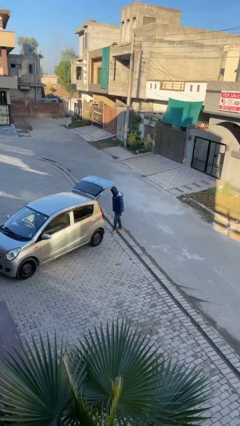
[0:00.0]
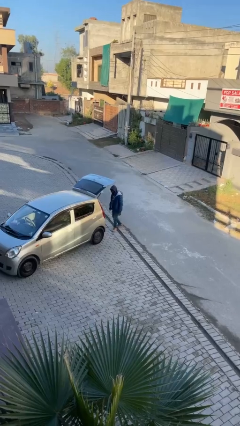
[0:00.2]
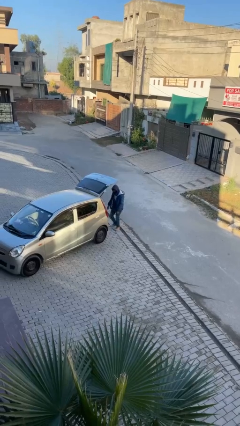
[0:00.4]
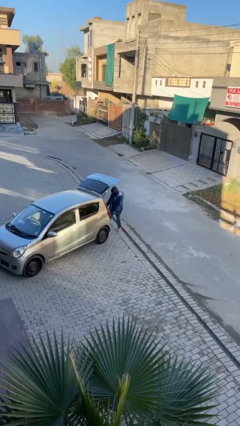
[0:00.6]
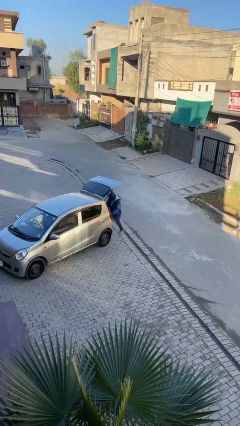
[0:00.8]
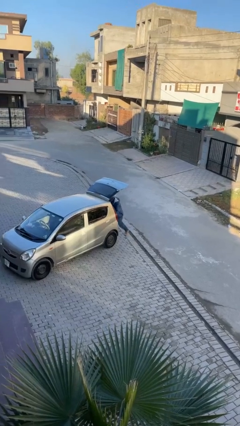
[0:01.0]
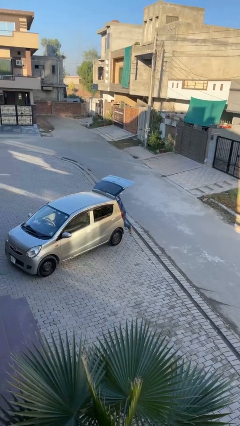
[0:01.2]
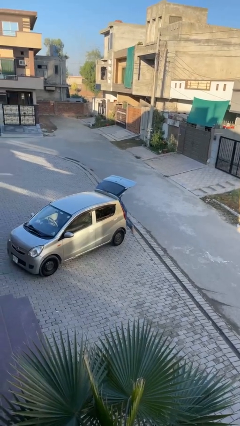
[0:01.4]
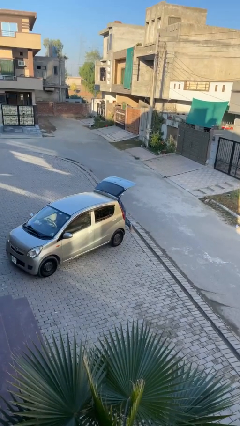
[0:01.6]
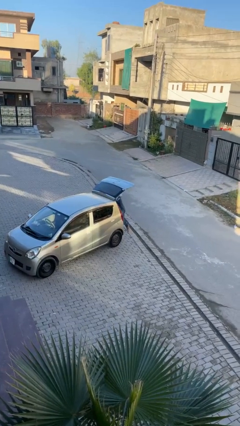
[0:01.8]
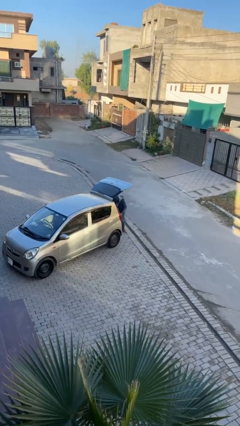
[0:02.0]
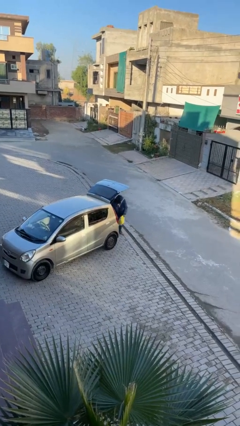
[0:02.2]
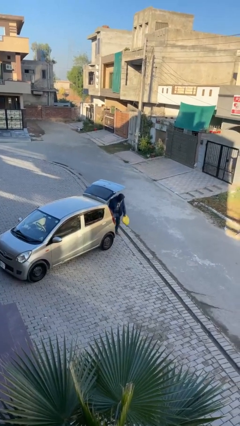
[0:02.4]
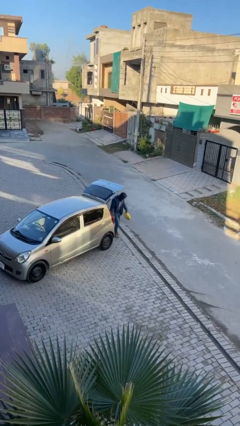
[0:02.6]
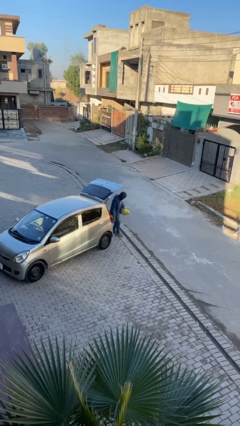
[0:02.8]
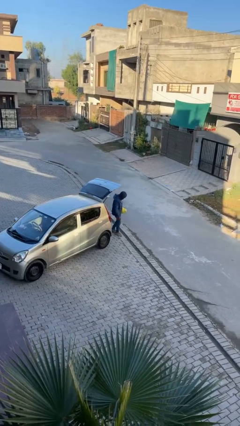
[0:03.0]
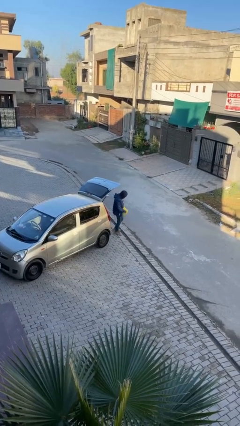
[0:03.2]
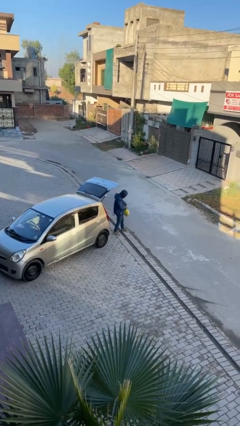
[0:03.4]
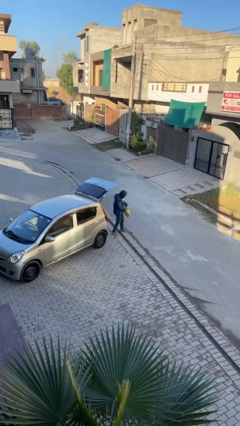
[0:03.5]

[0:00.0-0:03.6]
person unloads car

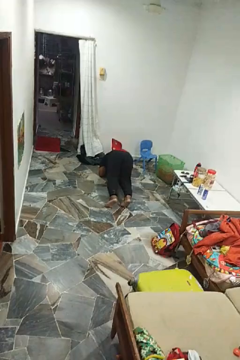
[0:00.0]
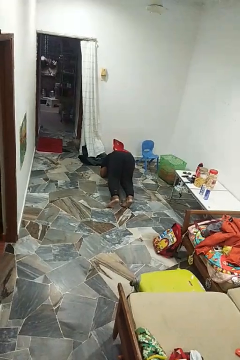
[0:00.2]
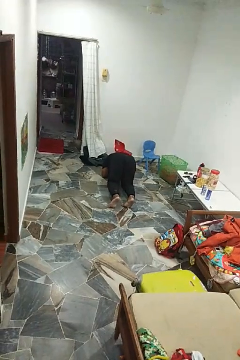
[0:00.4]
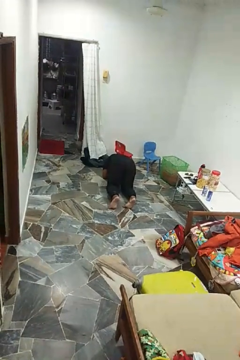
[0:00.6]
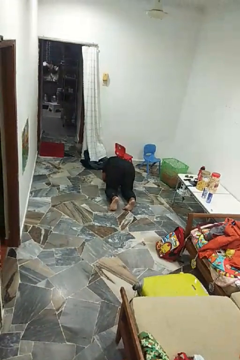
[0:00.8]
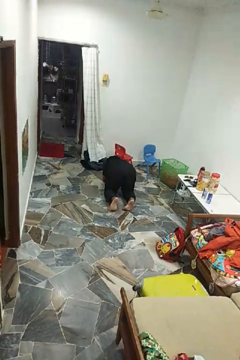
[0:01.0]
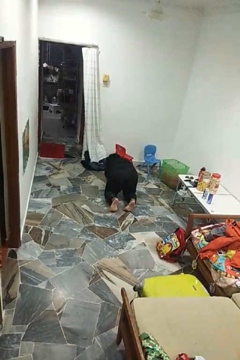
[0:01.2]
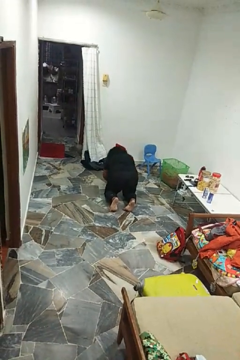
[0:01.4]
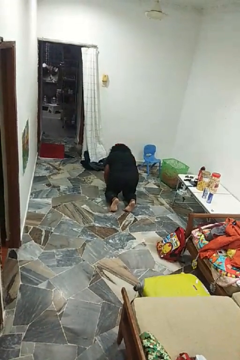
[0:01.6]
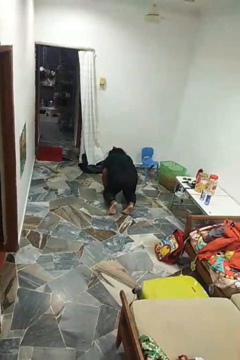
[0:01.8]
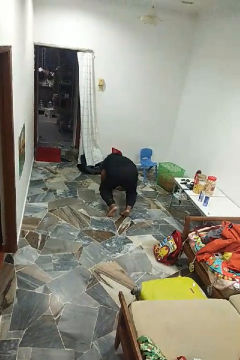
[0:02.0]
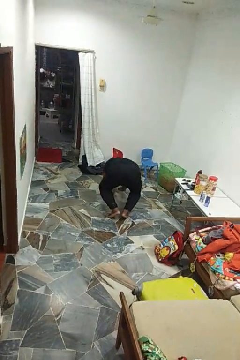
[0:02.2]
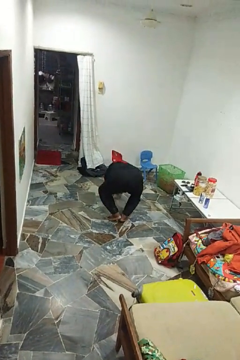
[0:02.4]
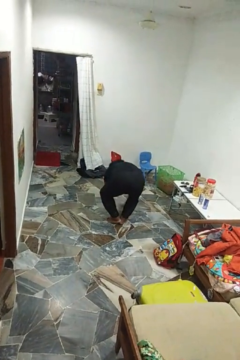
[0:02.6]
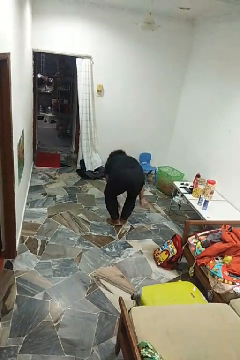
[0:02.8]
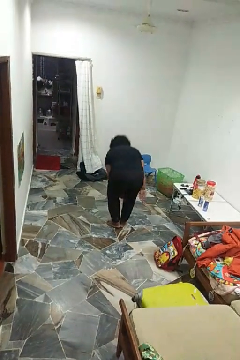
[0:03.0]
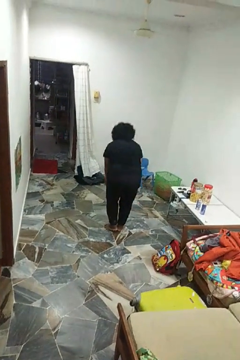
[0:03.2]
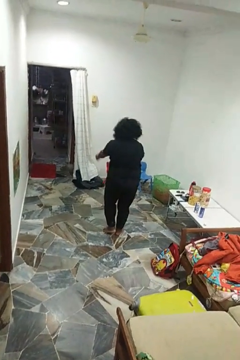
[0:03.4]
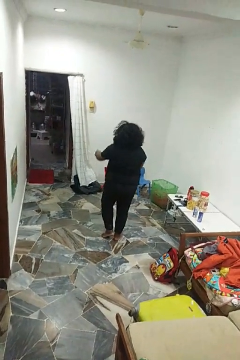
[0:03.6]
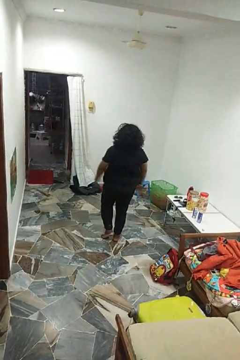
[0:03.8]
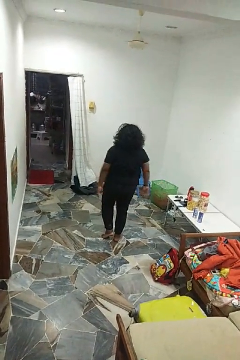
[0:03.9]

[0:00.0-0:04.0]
person stands up from floor

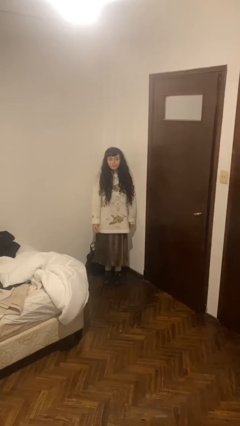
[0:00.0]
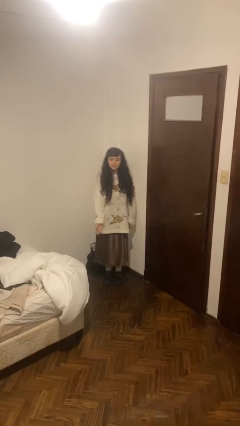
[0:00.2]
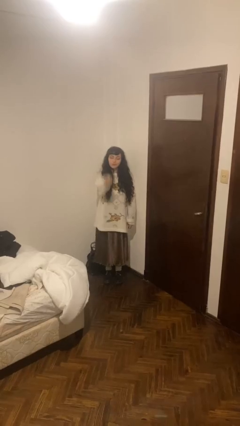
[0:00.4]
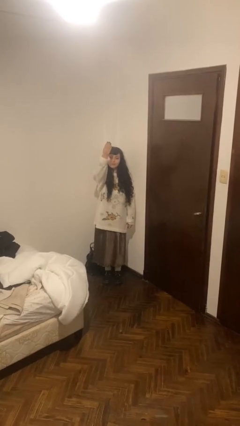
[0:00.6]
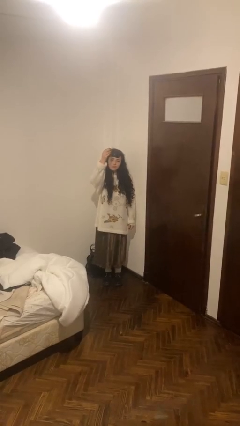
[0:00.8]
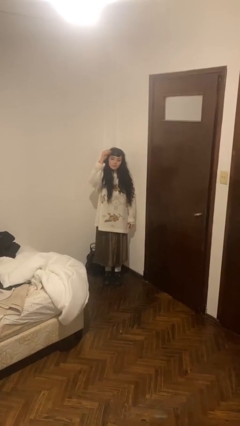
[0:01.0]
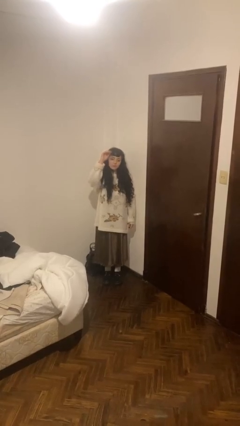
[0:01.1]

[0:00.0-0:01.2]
person gestures swipe up

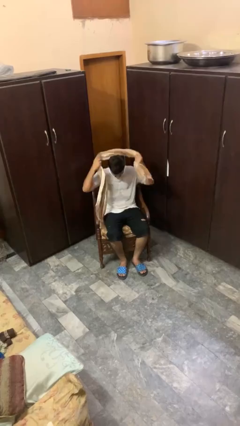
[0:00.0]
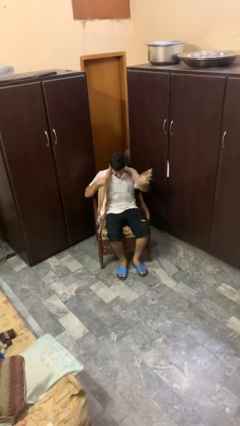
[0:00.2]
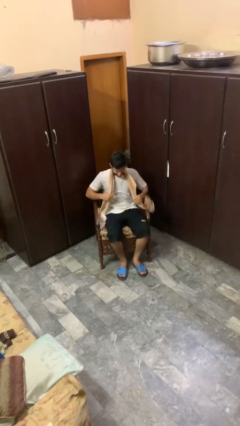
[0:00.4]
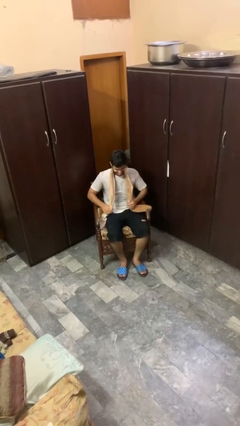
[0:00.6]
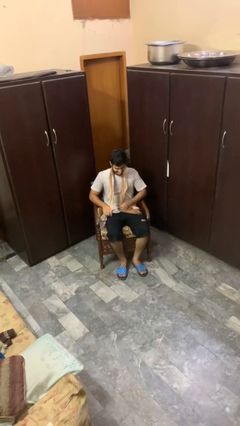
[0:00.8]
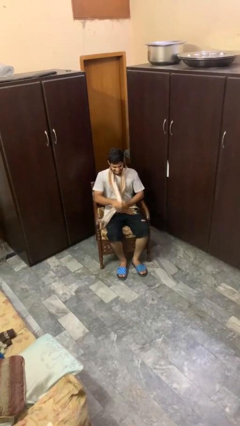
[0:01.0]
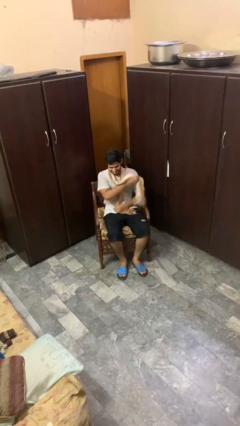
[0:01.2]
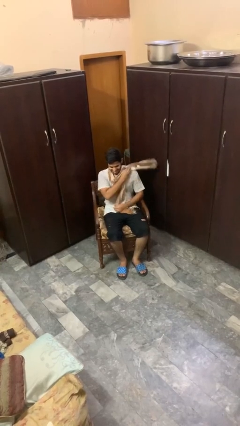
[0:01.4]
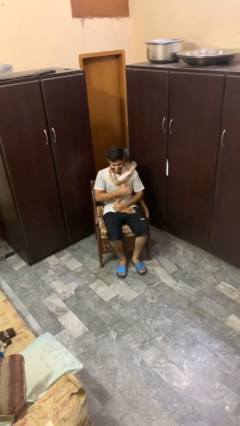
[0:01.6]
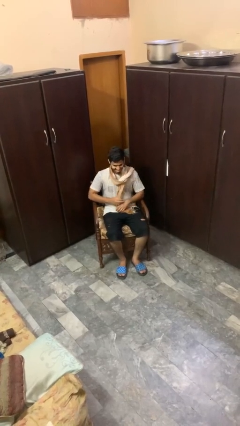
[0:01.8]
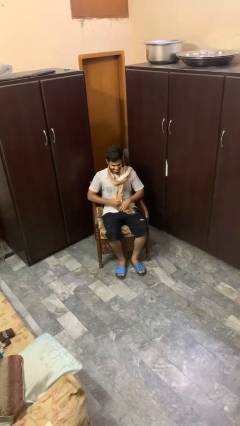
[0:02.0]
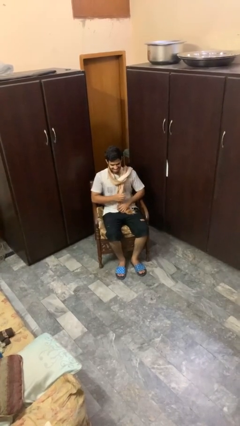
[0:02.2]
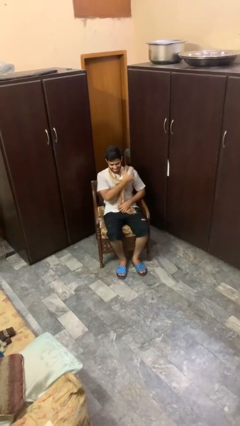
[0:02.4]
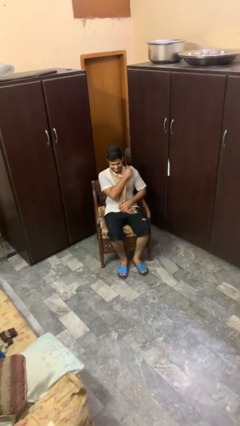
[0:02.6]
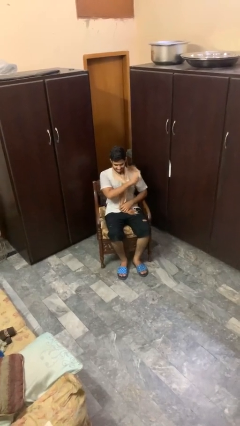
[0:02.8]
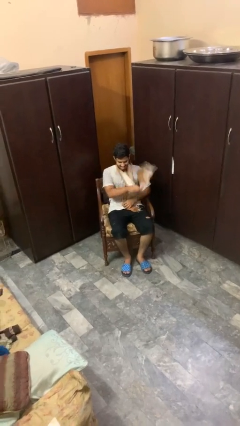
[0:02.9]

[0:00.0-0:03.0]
person puts on scarf

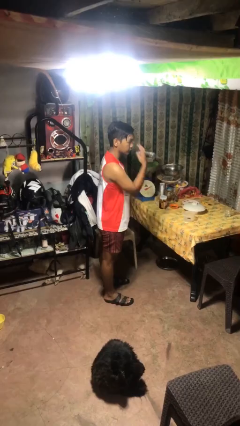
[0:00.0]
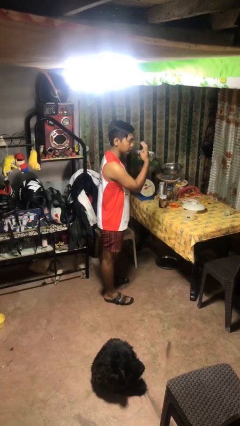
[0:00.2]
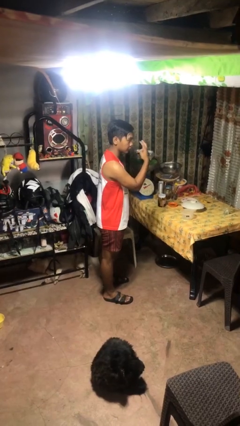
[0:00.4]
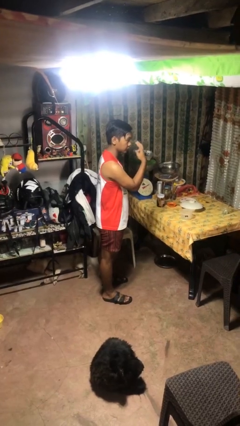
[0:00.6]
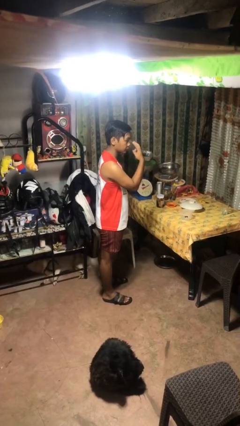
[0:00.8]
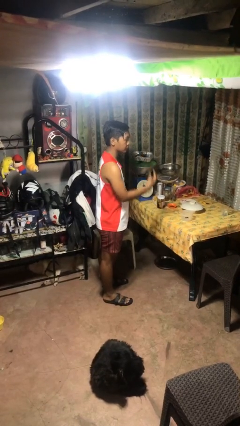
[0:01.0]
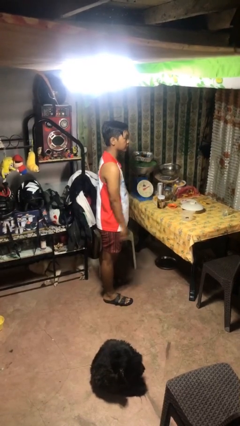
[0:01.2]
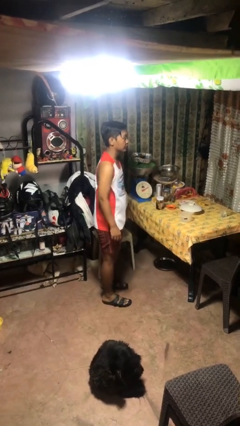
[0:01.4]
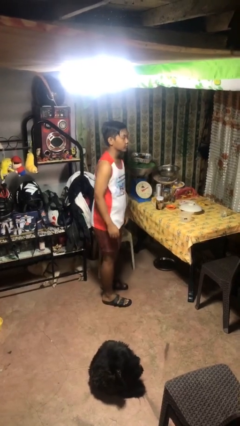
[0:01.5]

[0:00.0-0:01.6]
person gestures watch closely

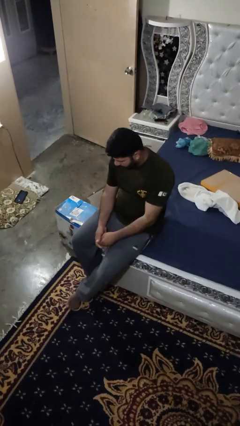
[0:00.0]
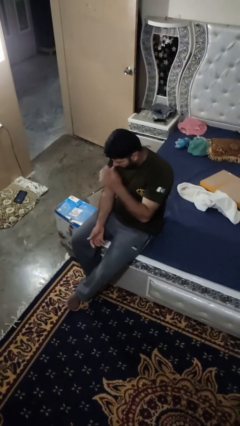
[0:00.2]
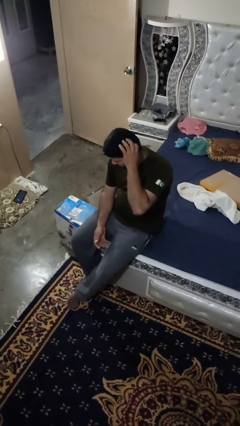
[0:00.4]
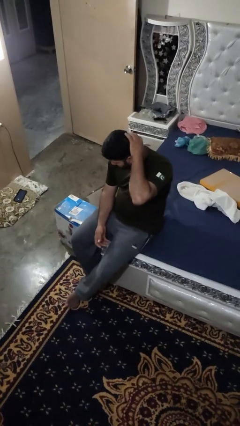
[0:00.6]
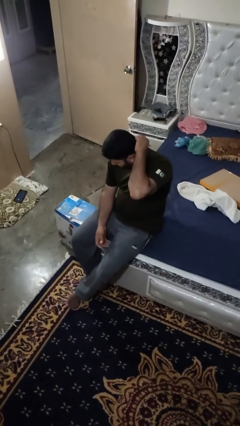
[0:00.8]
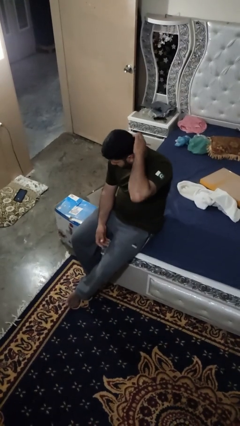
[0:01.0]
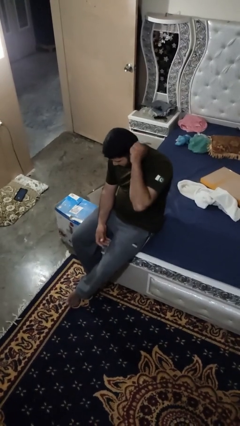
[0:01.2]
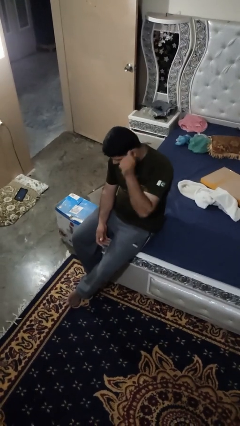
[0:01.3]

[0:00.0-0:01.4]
person strokes hair

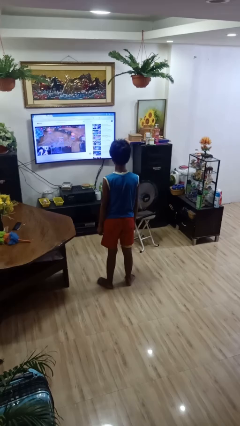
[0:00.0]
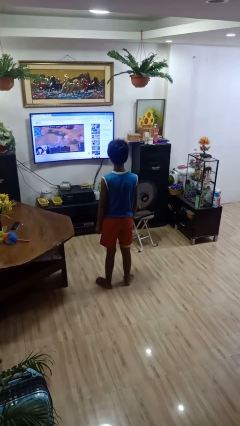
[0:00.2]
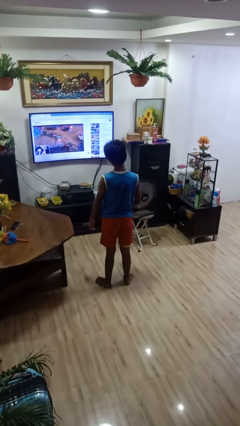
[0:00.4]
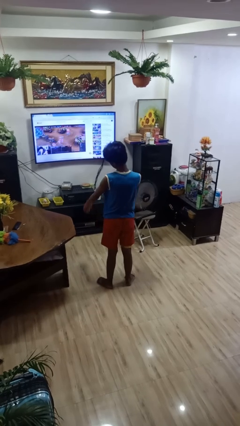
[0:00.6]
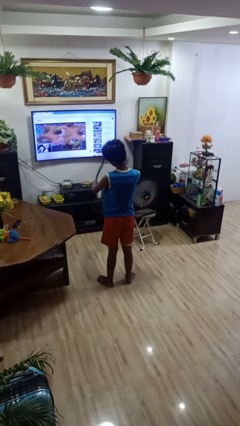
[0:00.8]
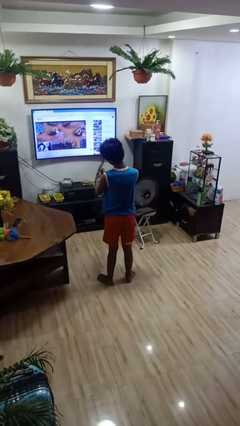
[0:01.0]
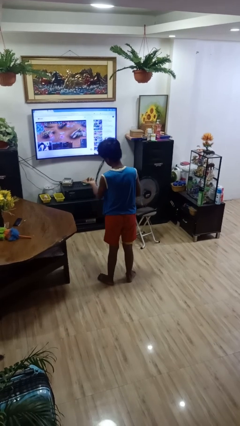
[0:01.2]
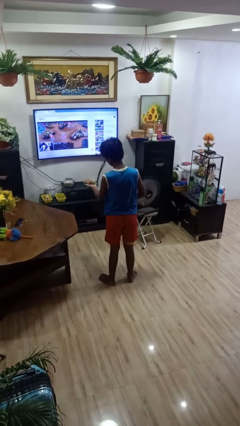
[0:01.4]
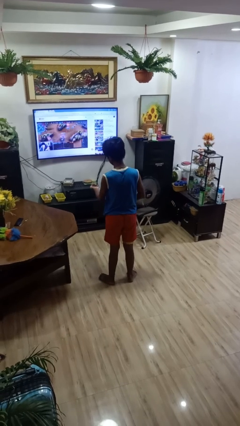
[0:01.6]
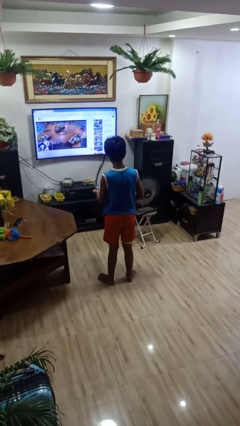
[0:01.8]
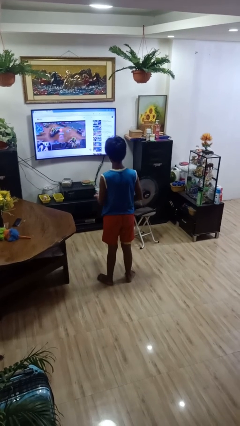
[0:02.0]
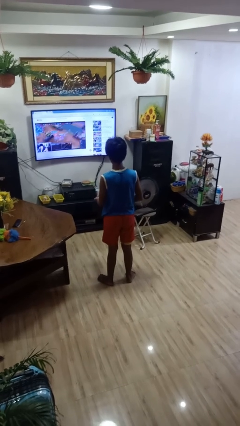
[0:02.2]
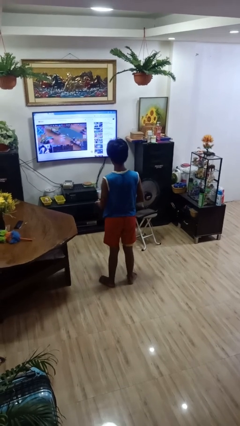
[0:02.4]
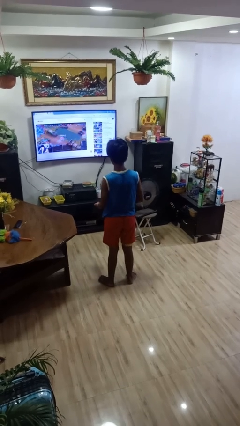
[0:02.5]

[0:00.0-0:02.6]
person swats bug

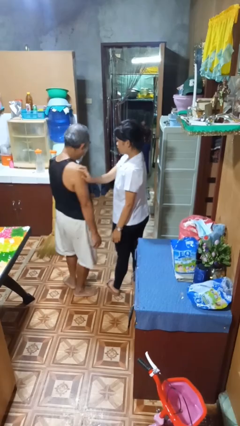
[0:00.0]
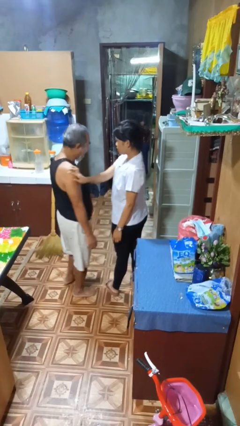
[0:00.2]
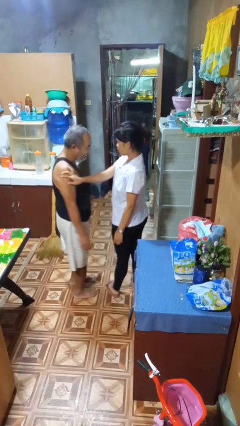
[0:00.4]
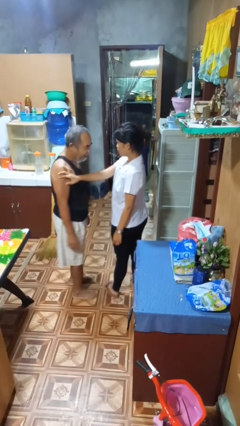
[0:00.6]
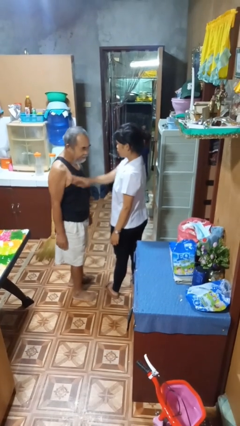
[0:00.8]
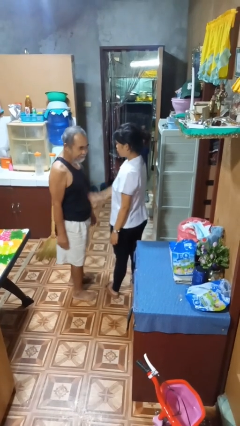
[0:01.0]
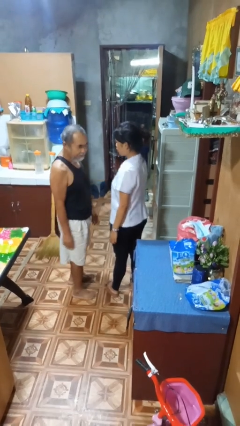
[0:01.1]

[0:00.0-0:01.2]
person spins person around
